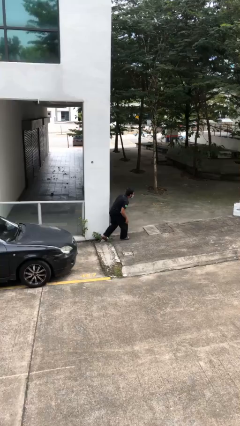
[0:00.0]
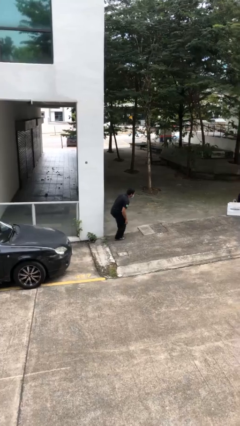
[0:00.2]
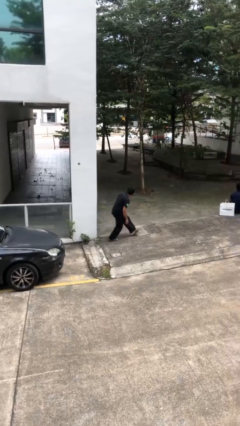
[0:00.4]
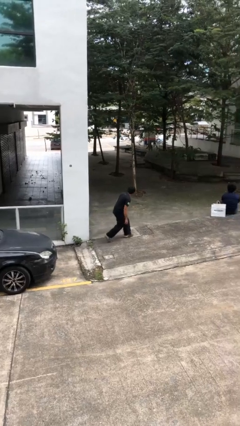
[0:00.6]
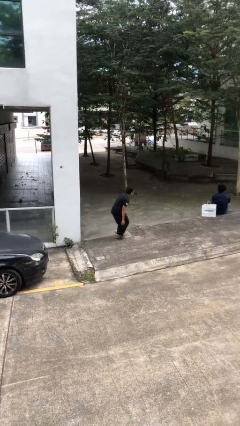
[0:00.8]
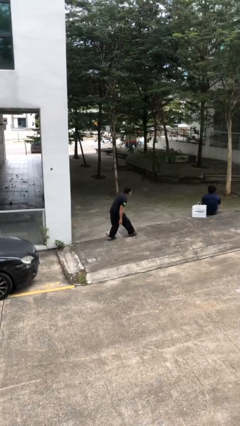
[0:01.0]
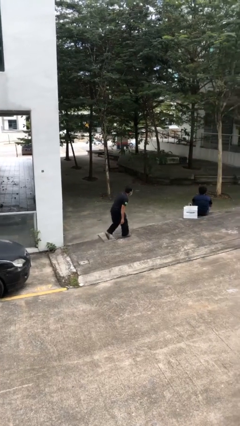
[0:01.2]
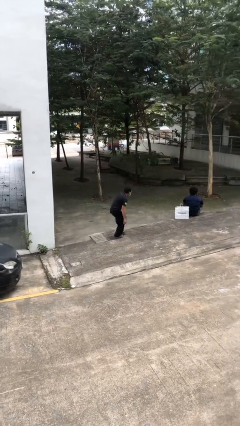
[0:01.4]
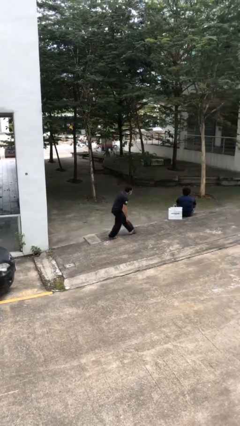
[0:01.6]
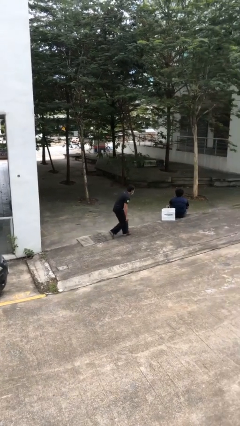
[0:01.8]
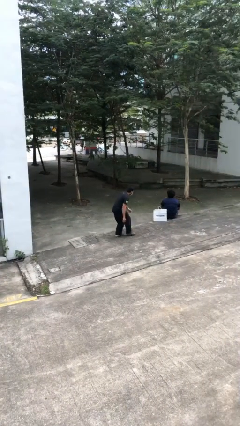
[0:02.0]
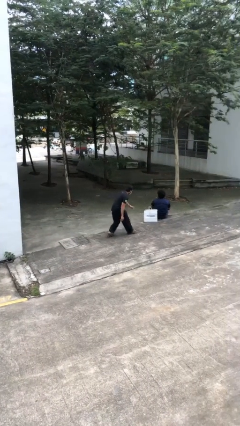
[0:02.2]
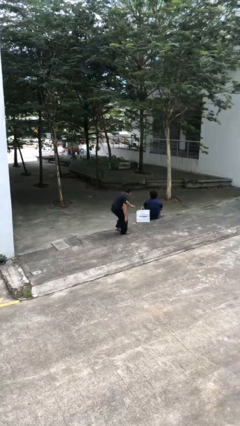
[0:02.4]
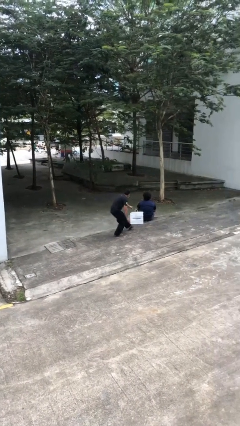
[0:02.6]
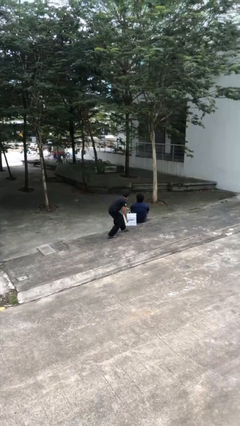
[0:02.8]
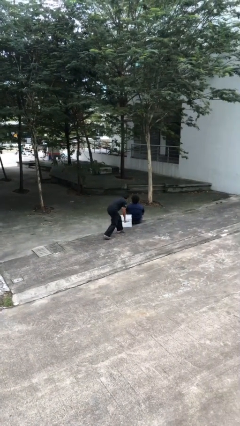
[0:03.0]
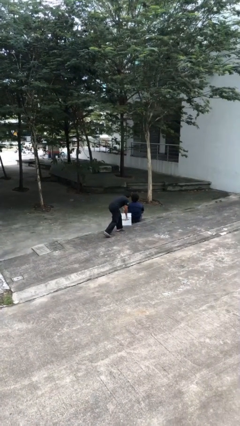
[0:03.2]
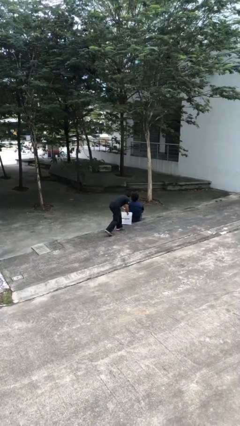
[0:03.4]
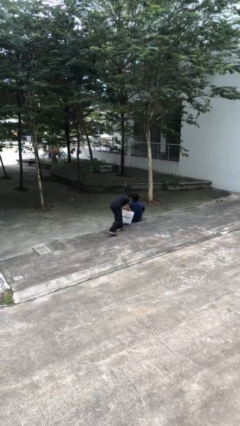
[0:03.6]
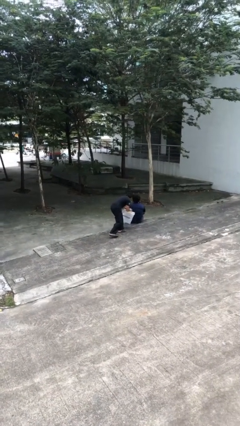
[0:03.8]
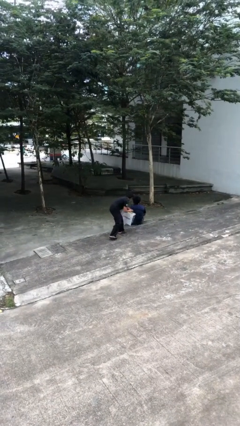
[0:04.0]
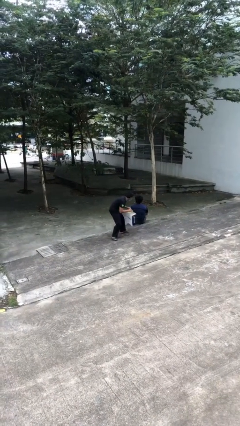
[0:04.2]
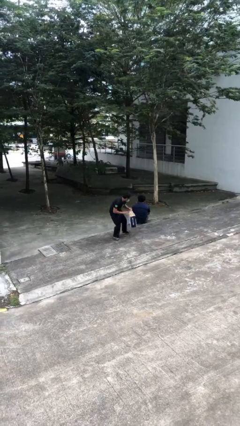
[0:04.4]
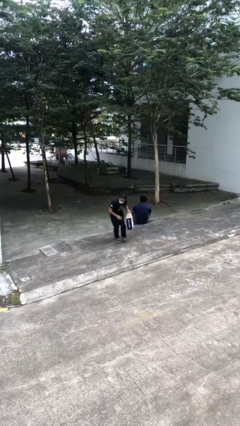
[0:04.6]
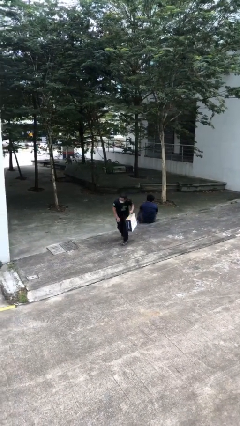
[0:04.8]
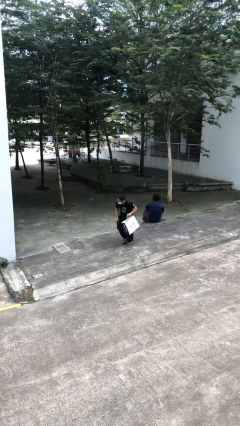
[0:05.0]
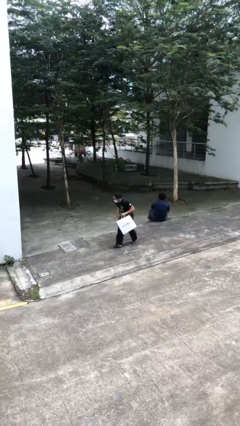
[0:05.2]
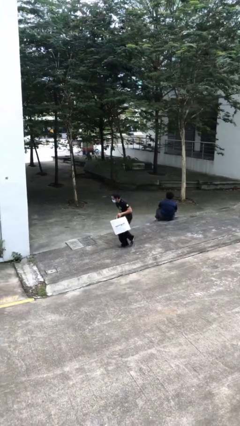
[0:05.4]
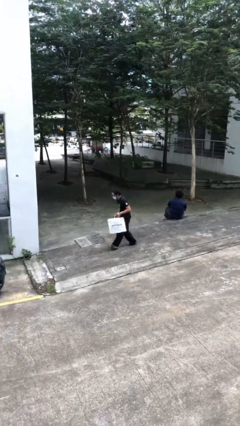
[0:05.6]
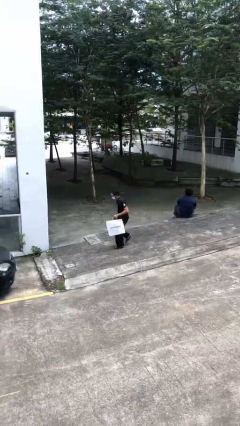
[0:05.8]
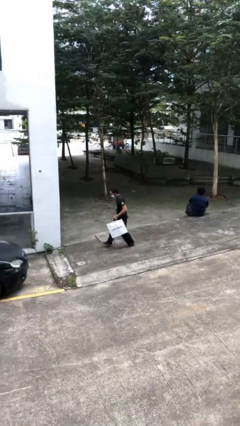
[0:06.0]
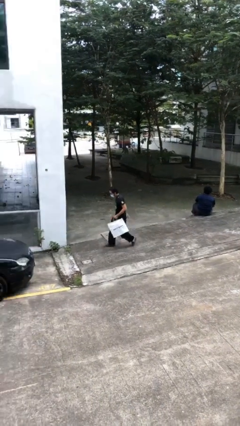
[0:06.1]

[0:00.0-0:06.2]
person steals object from person

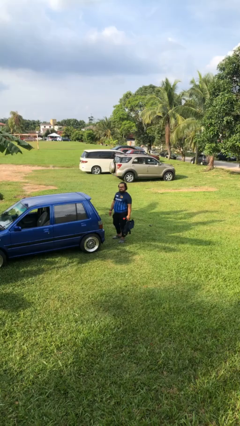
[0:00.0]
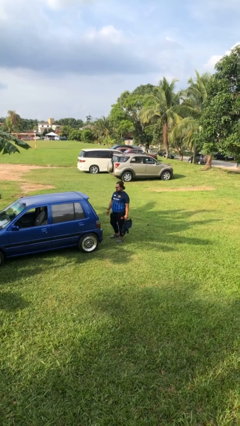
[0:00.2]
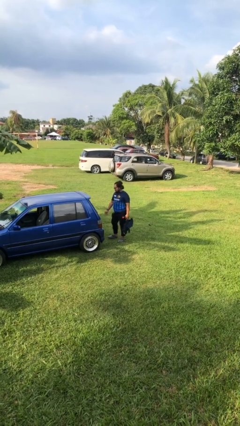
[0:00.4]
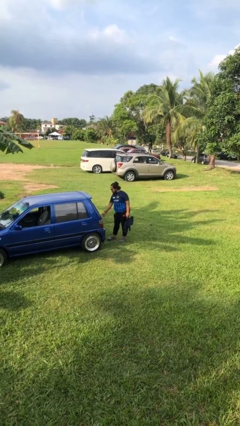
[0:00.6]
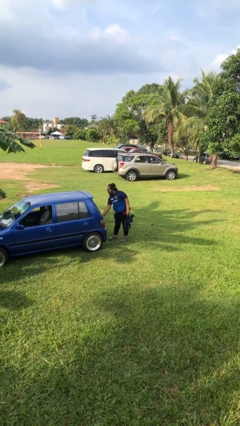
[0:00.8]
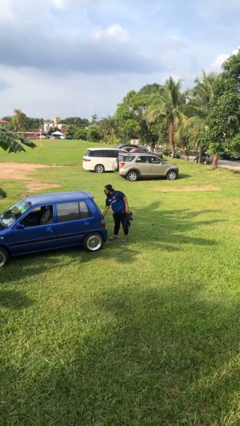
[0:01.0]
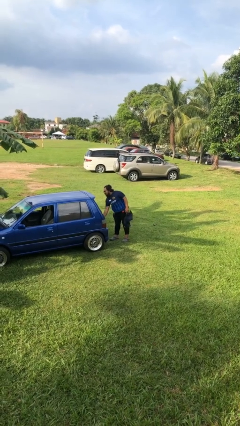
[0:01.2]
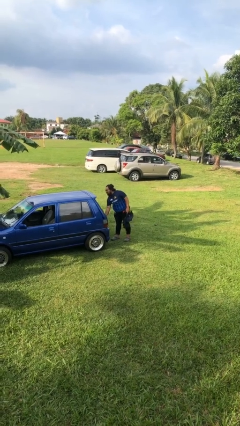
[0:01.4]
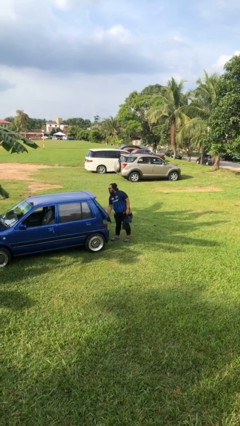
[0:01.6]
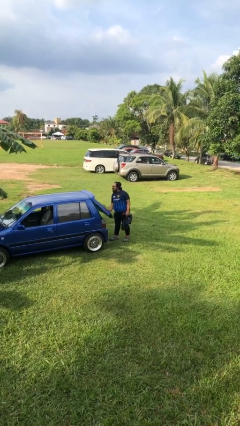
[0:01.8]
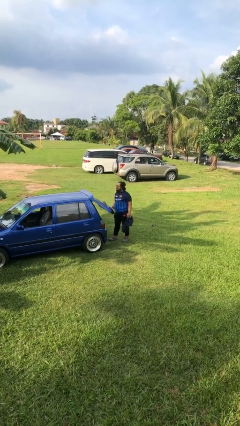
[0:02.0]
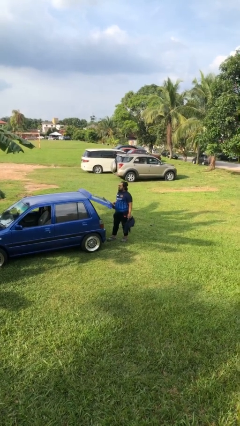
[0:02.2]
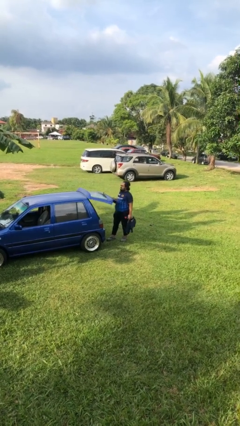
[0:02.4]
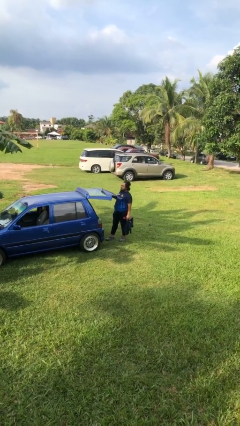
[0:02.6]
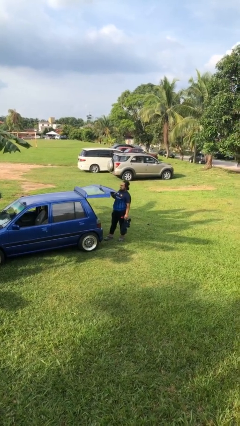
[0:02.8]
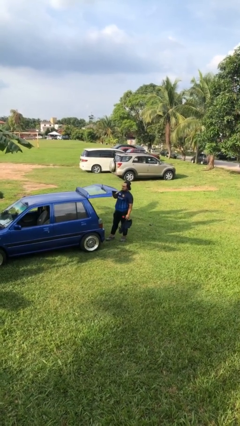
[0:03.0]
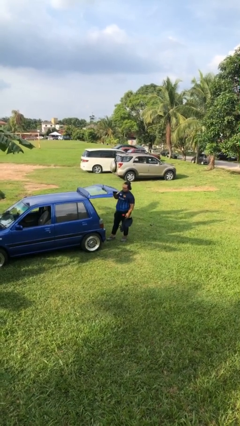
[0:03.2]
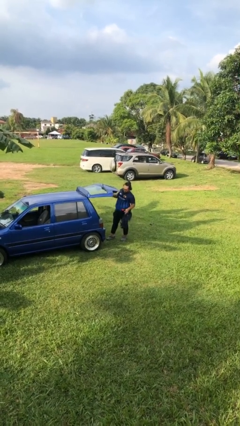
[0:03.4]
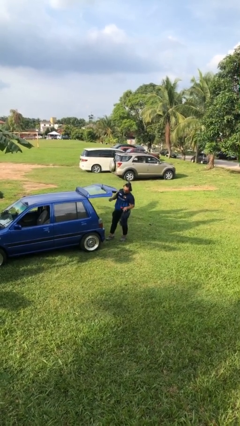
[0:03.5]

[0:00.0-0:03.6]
person opens car trunk

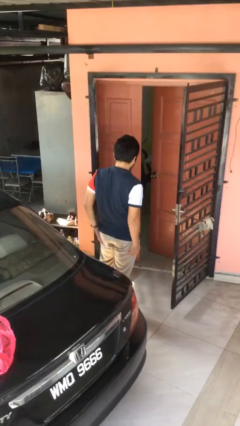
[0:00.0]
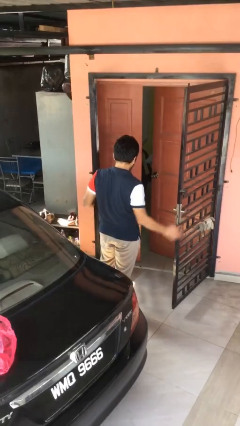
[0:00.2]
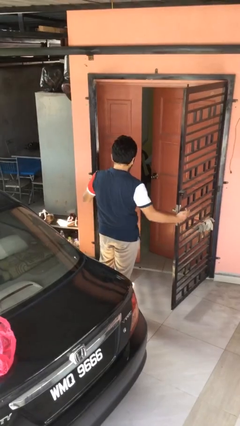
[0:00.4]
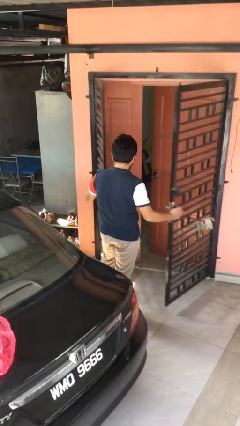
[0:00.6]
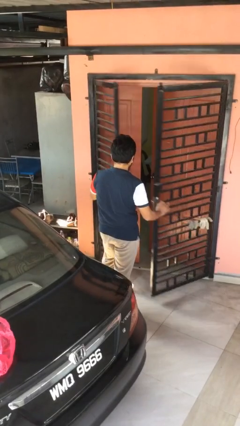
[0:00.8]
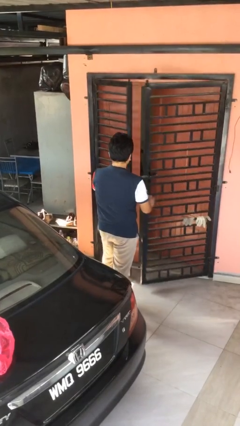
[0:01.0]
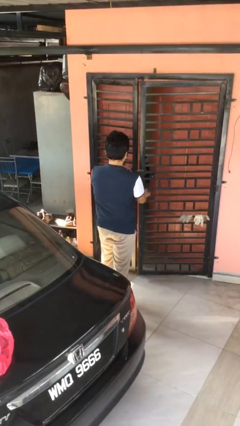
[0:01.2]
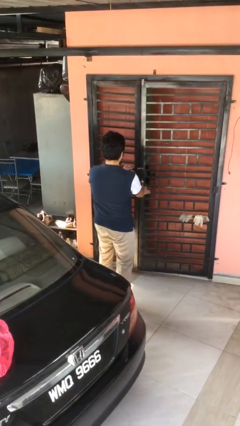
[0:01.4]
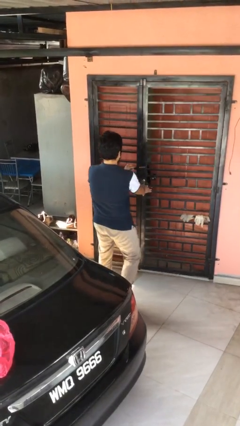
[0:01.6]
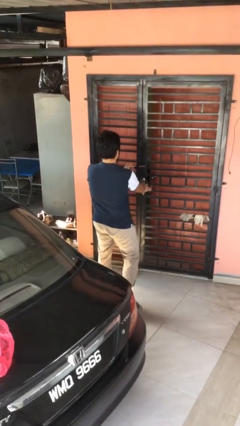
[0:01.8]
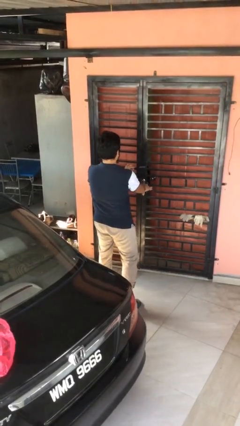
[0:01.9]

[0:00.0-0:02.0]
person closes gate

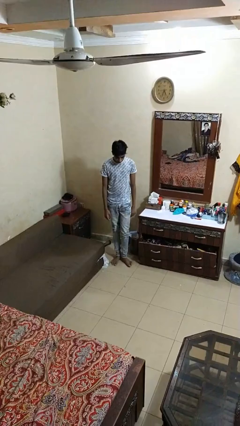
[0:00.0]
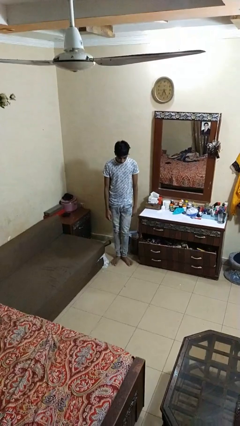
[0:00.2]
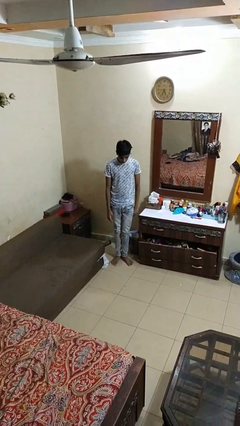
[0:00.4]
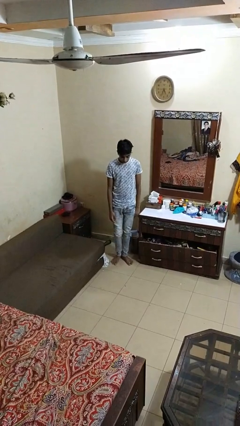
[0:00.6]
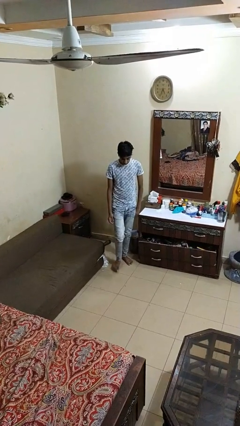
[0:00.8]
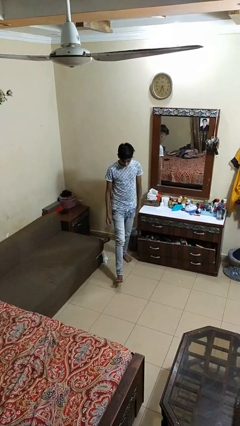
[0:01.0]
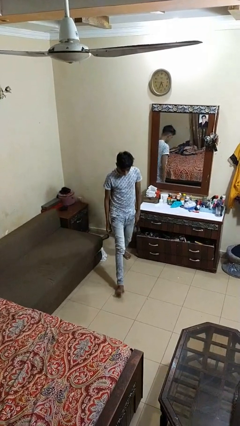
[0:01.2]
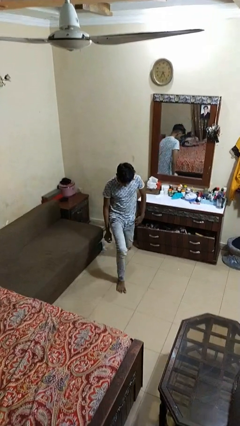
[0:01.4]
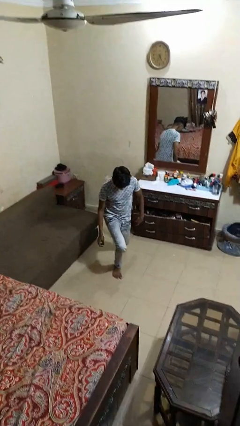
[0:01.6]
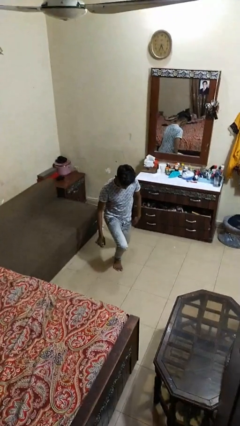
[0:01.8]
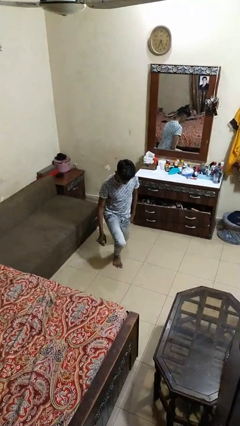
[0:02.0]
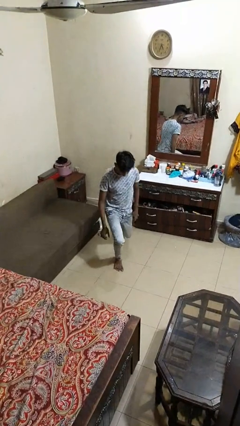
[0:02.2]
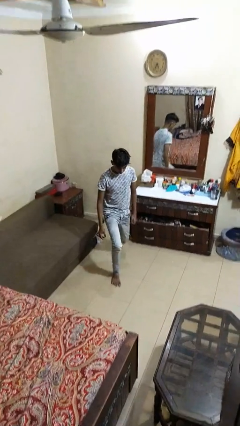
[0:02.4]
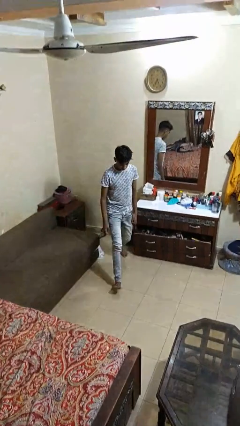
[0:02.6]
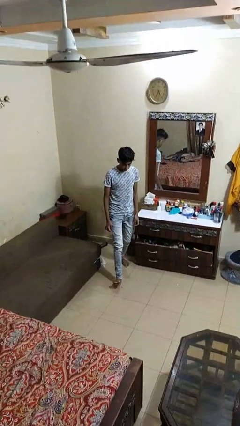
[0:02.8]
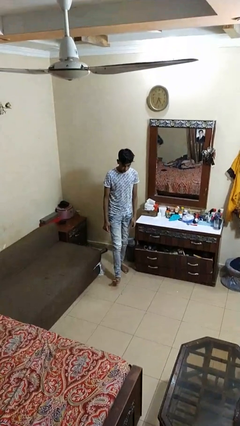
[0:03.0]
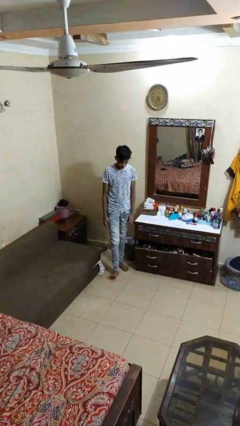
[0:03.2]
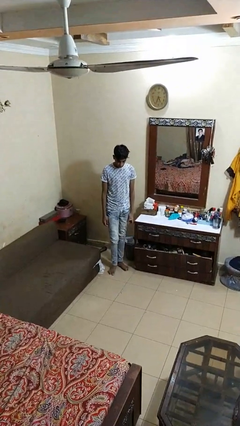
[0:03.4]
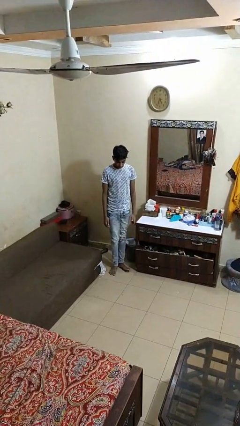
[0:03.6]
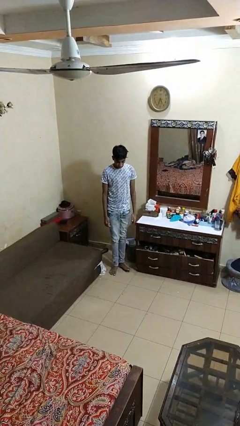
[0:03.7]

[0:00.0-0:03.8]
person exercises with lunges

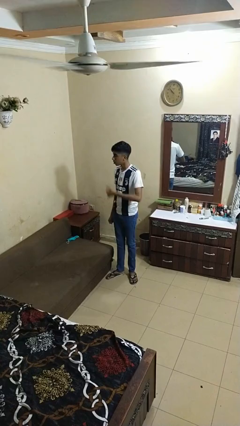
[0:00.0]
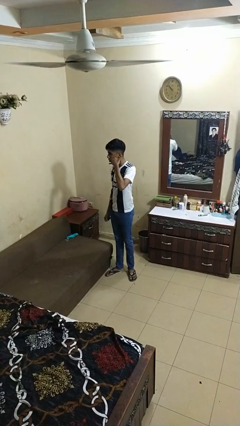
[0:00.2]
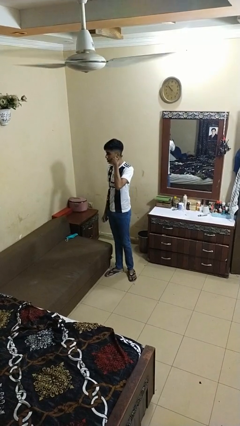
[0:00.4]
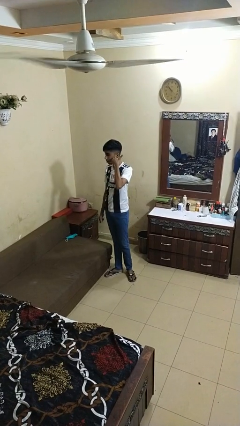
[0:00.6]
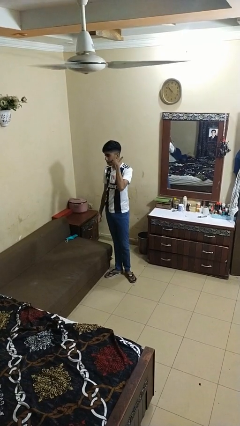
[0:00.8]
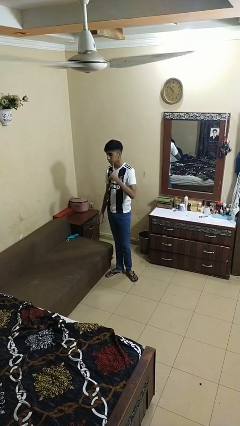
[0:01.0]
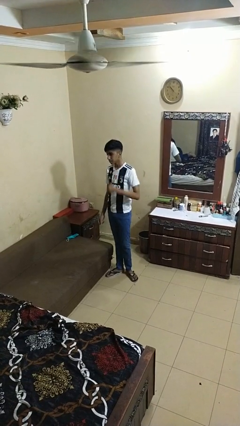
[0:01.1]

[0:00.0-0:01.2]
person gestures call me

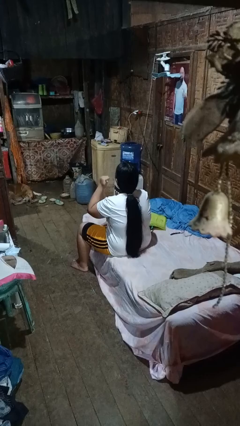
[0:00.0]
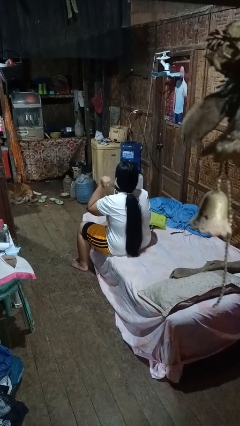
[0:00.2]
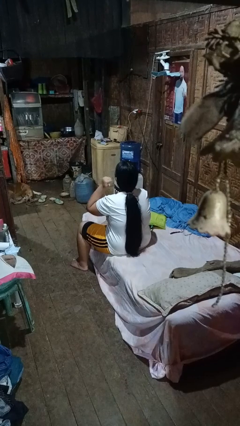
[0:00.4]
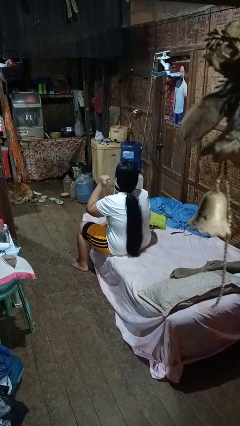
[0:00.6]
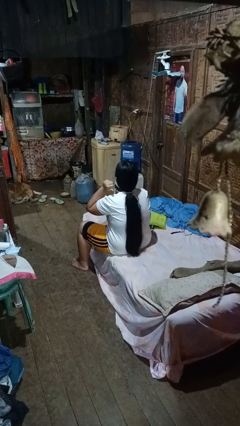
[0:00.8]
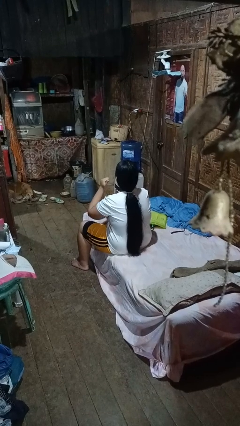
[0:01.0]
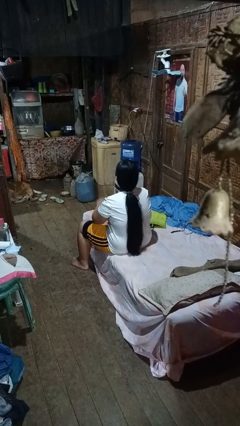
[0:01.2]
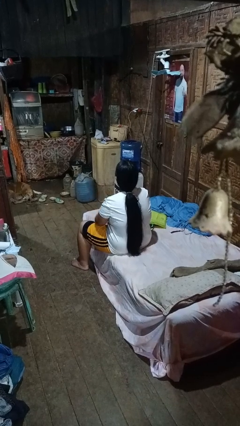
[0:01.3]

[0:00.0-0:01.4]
person gestures behind me
